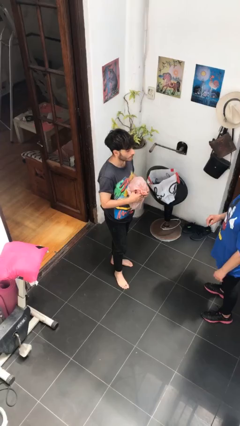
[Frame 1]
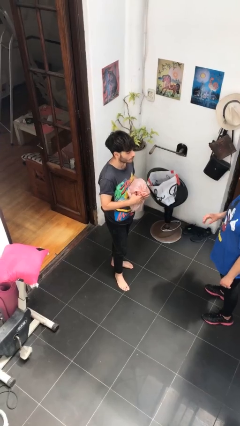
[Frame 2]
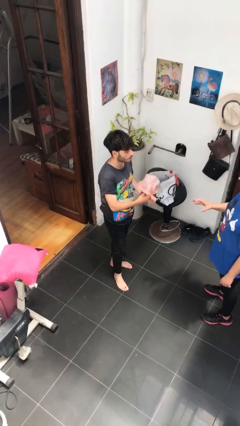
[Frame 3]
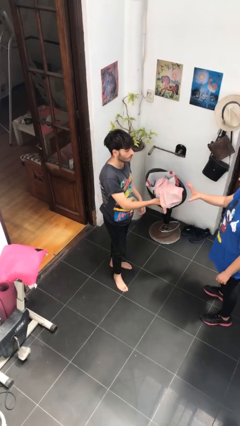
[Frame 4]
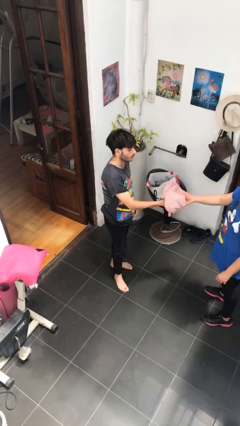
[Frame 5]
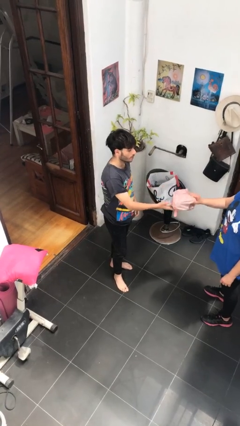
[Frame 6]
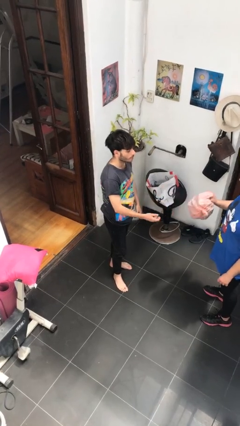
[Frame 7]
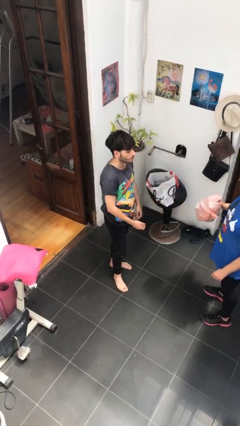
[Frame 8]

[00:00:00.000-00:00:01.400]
person transfers object to person

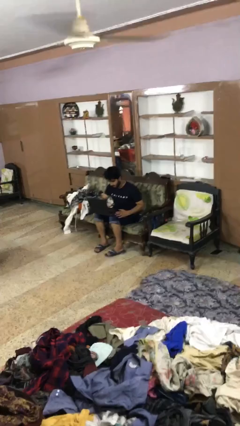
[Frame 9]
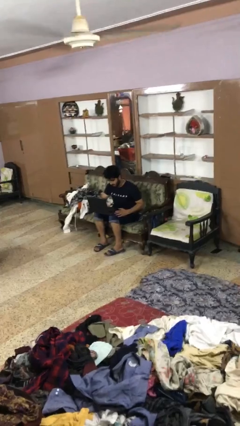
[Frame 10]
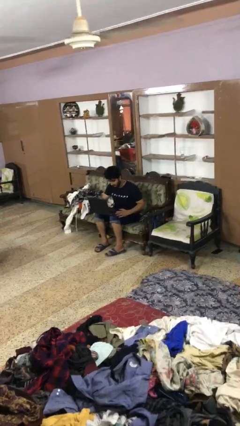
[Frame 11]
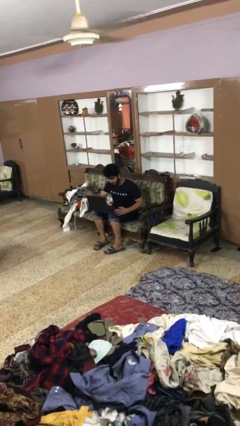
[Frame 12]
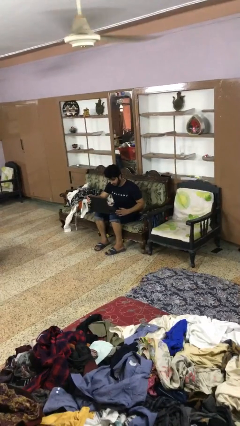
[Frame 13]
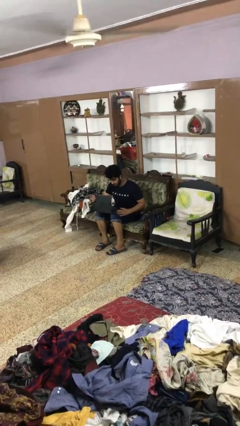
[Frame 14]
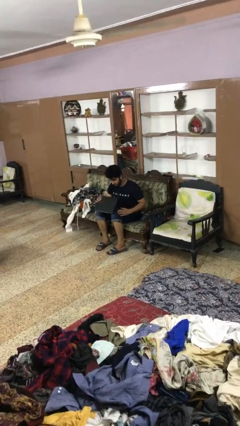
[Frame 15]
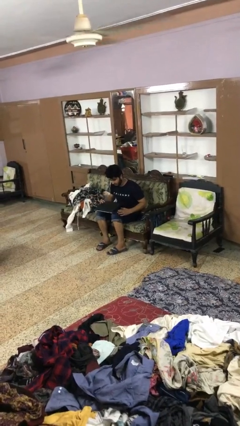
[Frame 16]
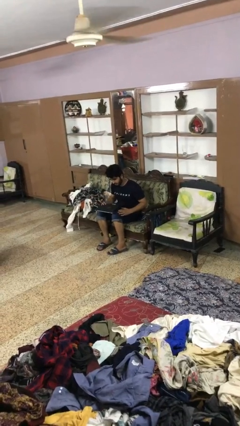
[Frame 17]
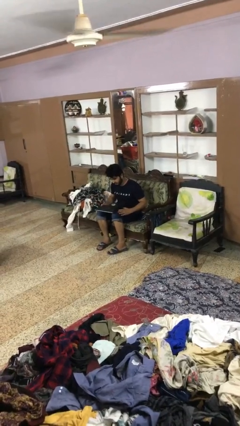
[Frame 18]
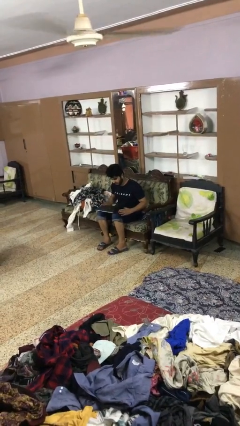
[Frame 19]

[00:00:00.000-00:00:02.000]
person closes laptop

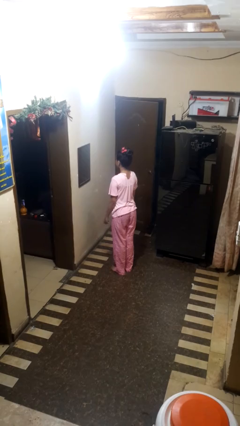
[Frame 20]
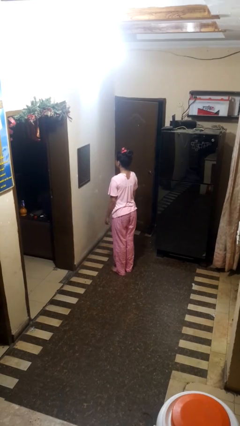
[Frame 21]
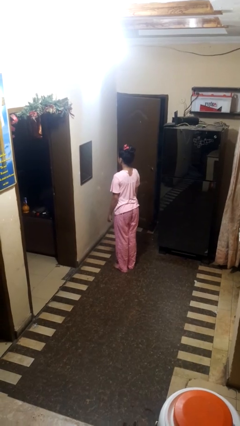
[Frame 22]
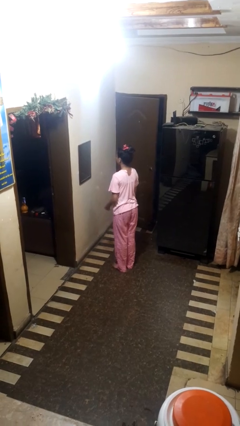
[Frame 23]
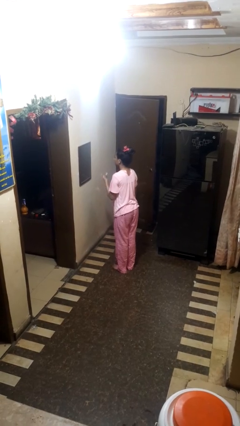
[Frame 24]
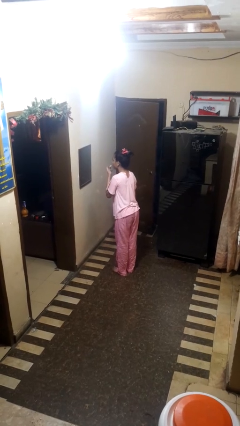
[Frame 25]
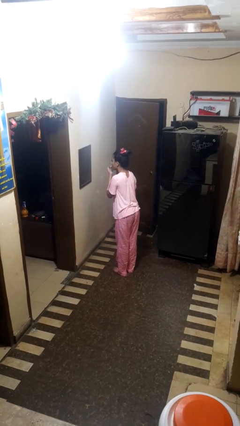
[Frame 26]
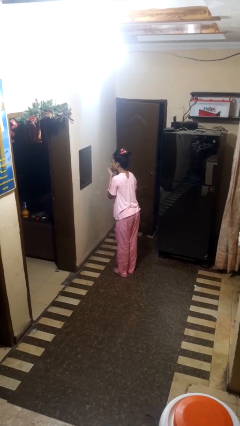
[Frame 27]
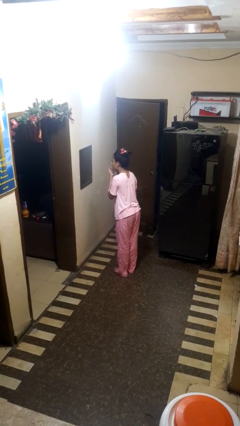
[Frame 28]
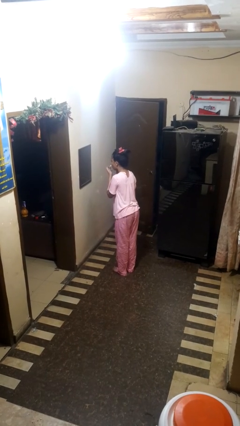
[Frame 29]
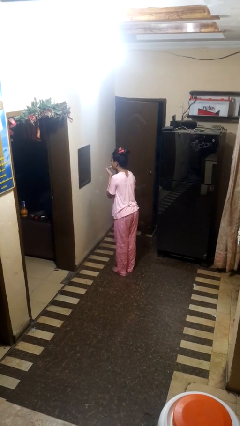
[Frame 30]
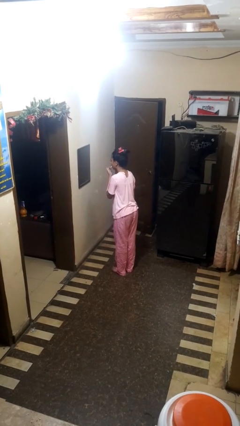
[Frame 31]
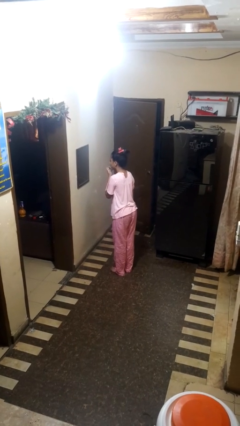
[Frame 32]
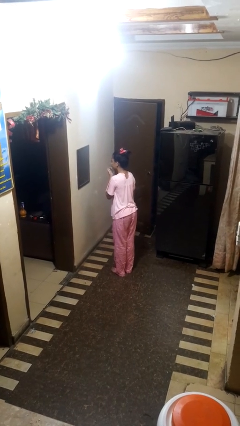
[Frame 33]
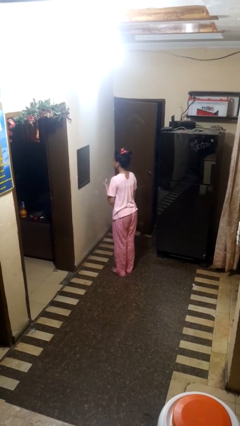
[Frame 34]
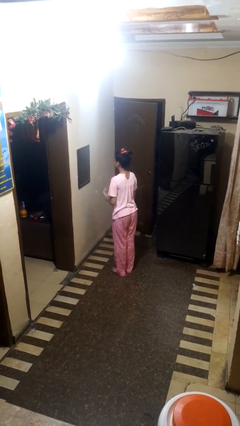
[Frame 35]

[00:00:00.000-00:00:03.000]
person applies lip makeup

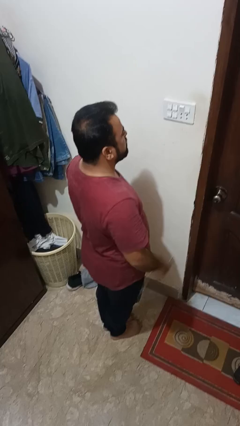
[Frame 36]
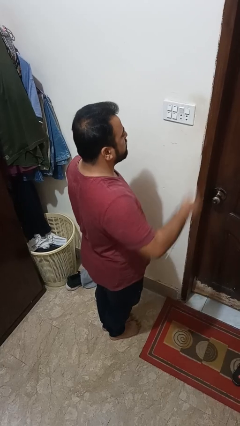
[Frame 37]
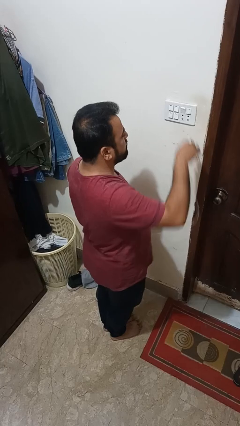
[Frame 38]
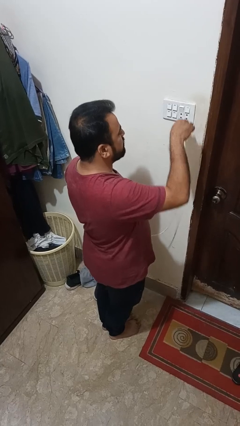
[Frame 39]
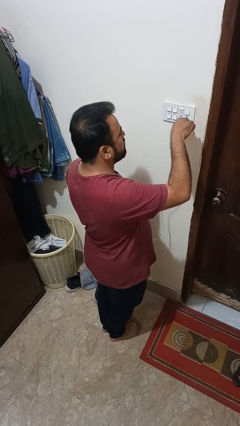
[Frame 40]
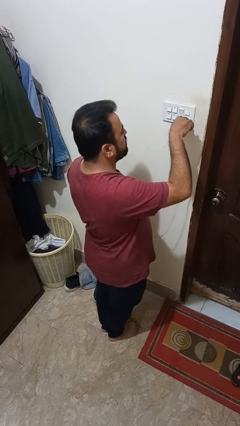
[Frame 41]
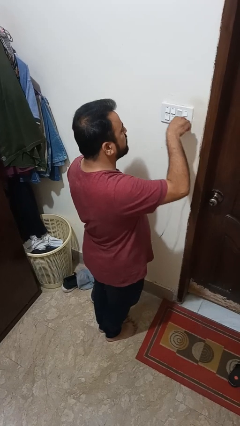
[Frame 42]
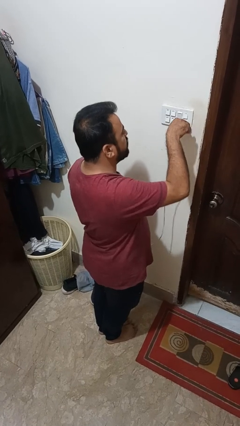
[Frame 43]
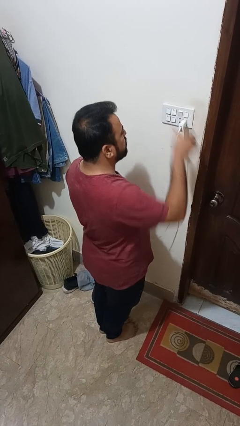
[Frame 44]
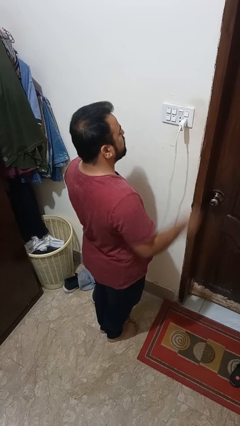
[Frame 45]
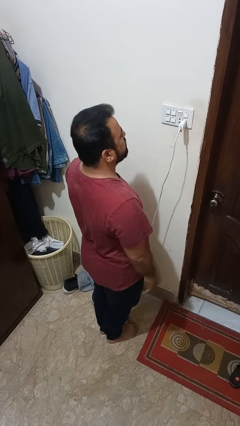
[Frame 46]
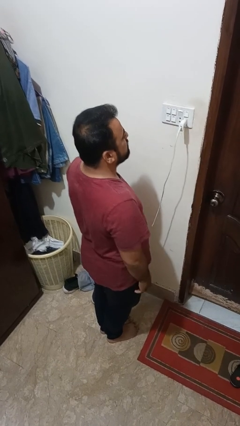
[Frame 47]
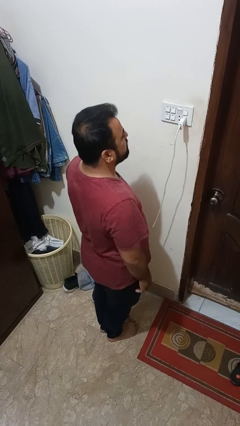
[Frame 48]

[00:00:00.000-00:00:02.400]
person plugs into electrical socket

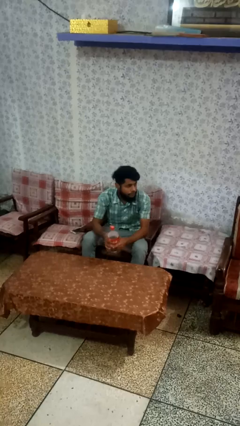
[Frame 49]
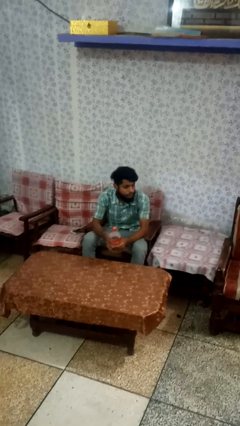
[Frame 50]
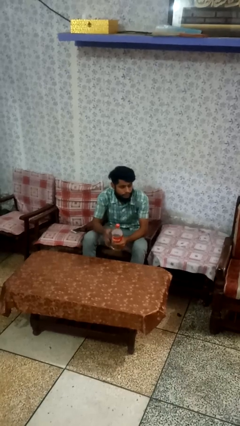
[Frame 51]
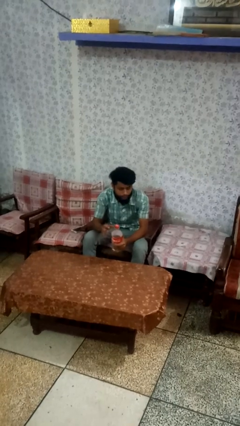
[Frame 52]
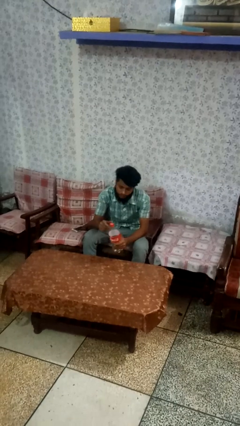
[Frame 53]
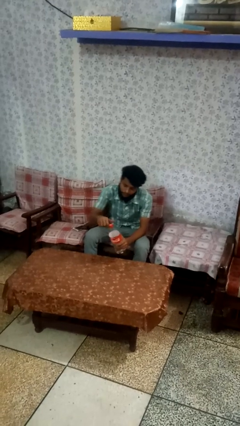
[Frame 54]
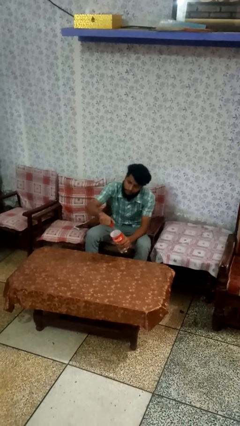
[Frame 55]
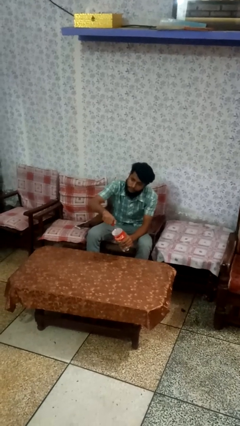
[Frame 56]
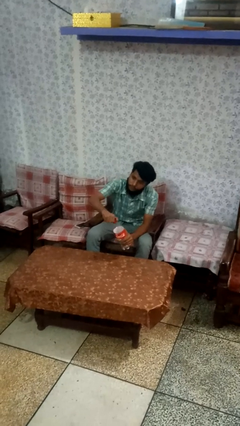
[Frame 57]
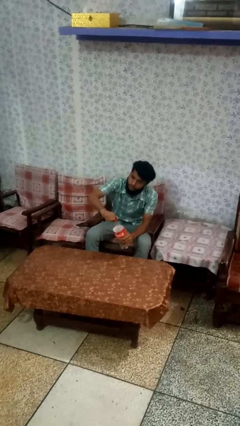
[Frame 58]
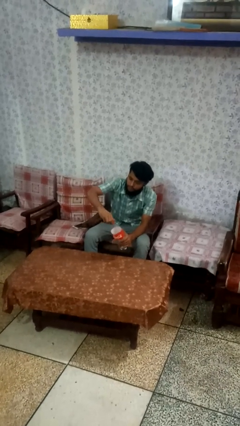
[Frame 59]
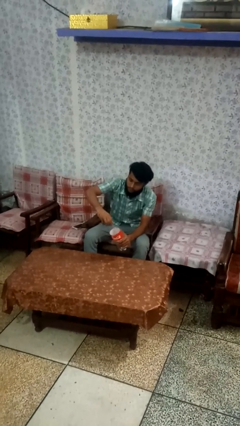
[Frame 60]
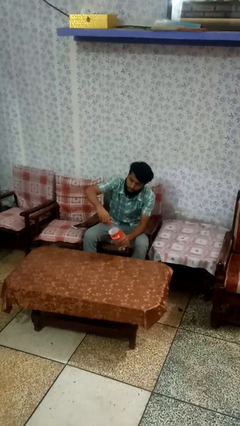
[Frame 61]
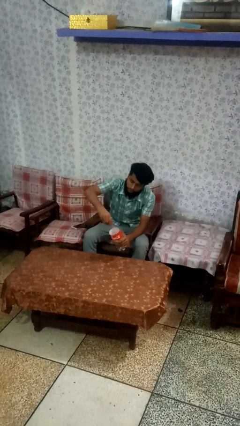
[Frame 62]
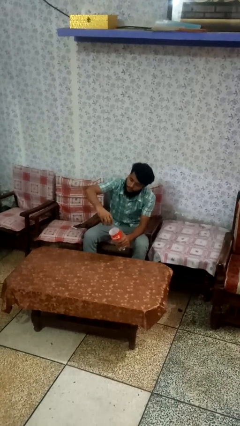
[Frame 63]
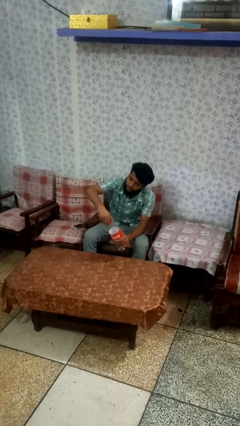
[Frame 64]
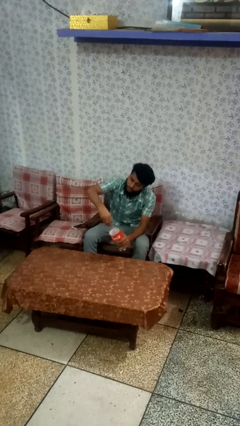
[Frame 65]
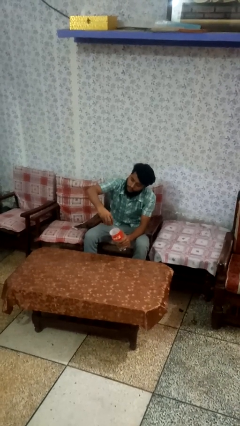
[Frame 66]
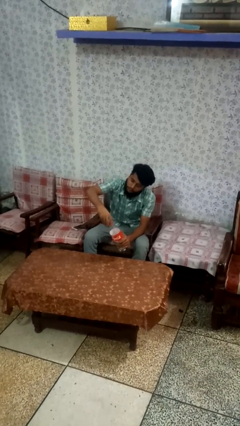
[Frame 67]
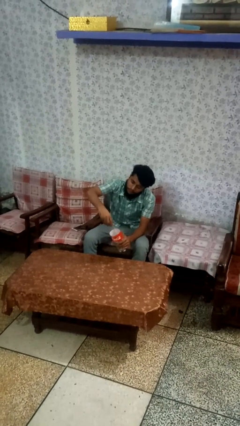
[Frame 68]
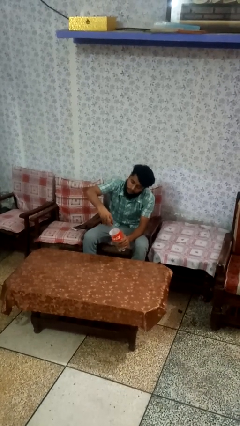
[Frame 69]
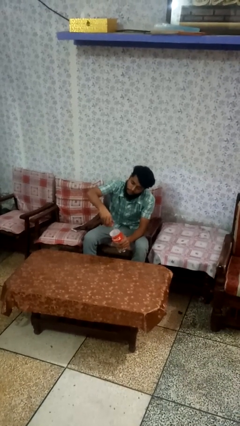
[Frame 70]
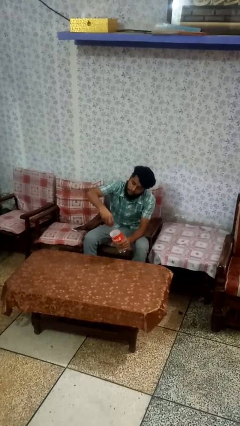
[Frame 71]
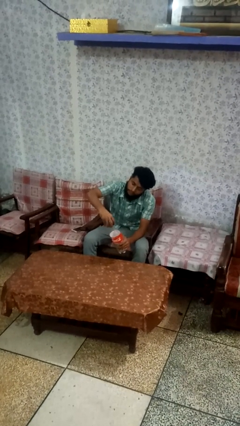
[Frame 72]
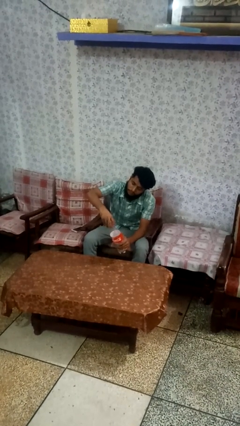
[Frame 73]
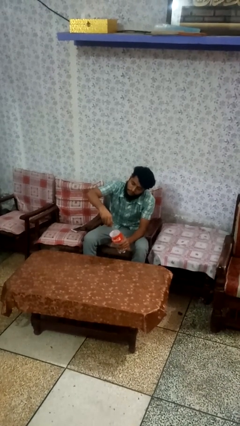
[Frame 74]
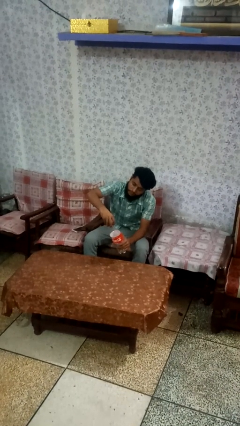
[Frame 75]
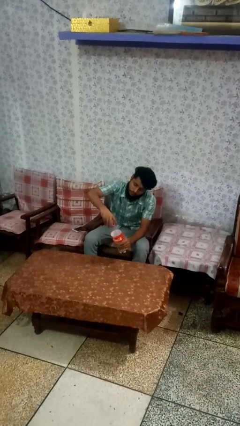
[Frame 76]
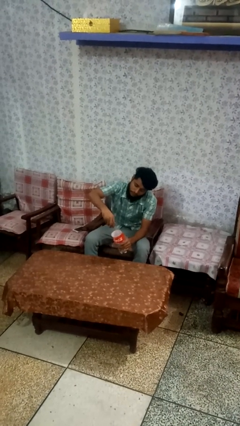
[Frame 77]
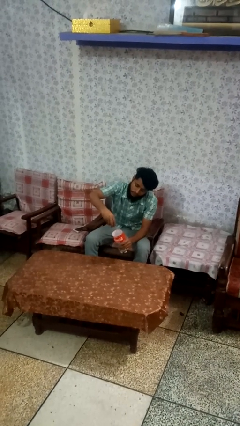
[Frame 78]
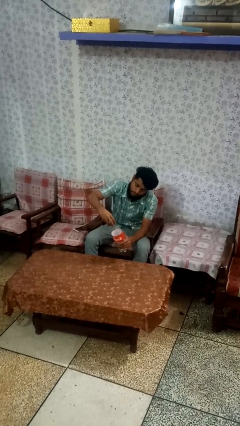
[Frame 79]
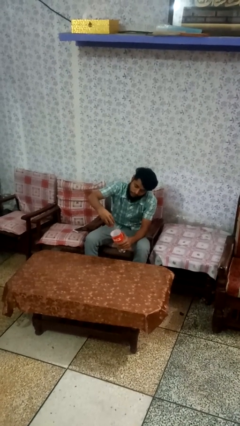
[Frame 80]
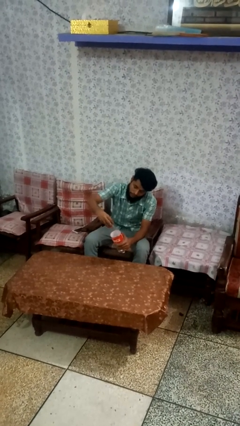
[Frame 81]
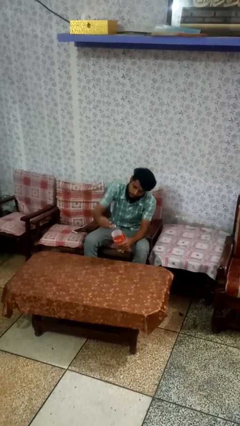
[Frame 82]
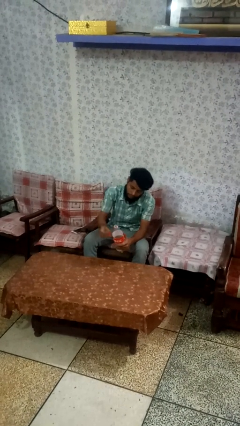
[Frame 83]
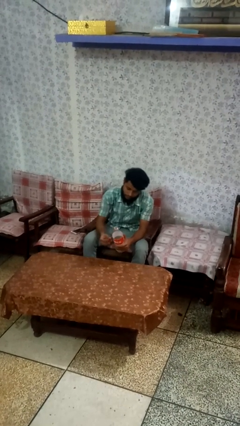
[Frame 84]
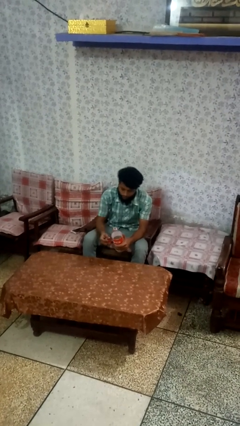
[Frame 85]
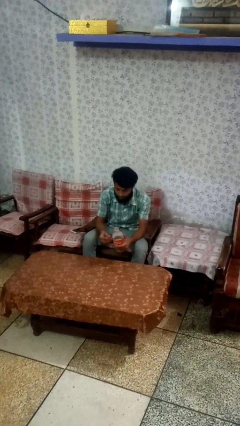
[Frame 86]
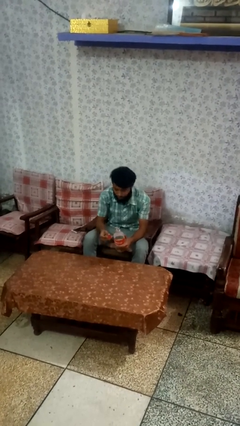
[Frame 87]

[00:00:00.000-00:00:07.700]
person unscrews lid from bottle

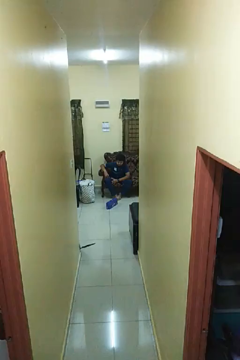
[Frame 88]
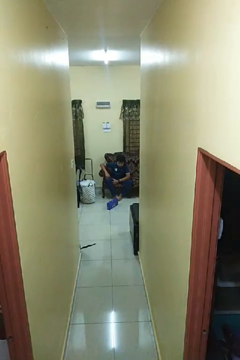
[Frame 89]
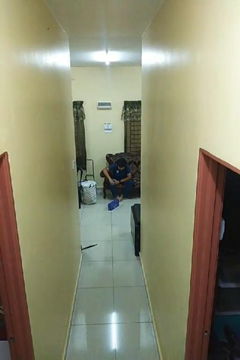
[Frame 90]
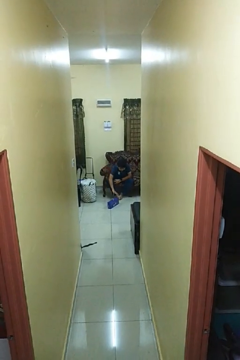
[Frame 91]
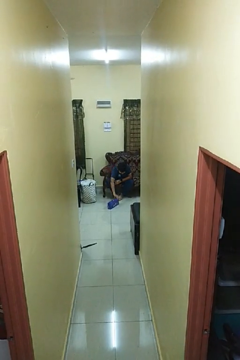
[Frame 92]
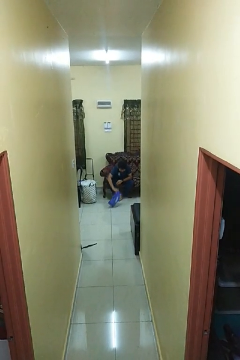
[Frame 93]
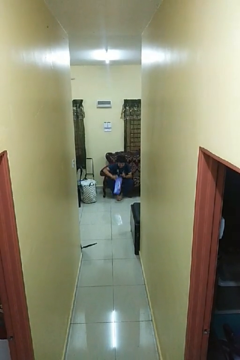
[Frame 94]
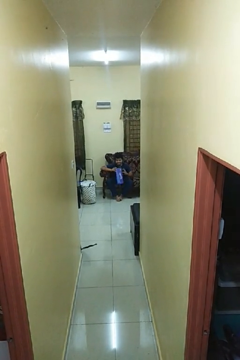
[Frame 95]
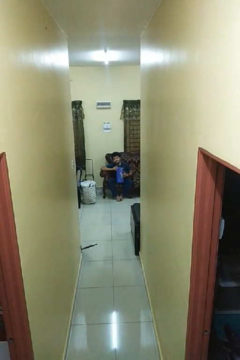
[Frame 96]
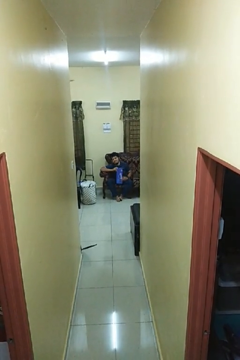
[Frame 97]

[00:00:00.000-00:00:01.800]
person picks up object from floor
